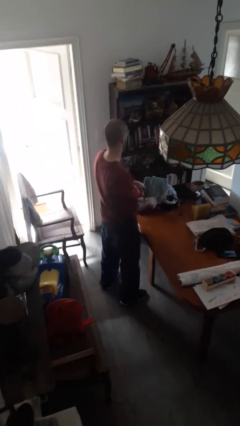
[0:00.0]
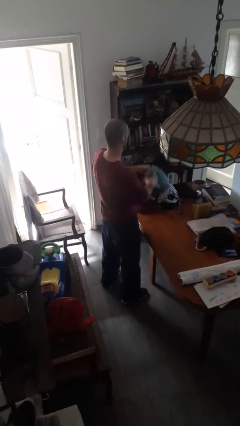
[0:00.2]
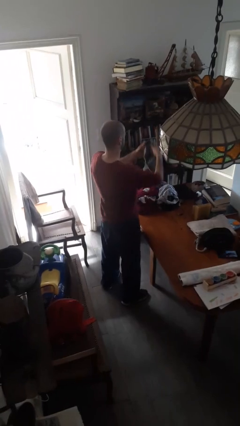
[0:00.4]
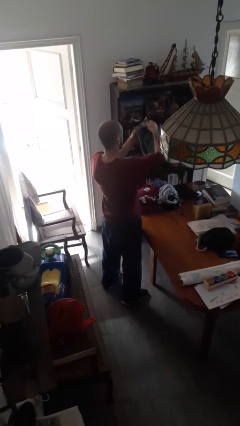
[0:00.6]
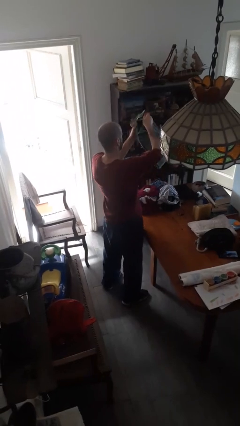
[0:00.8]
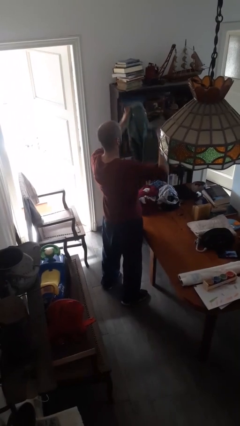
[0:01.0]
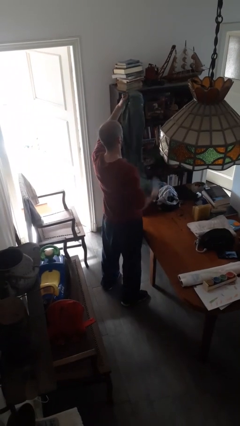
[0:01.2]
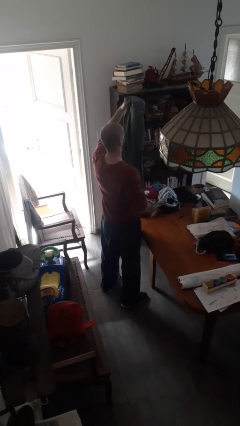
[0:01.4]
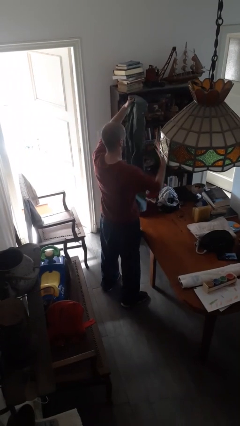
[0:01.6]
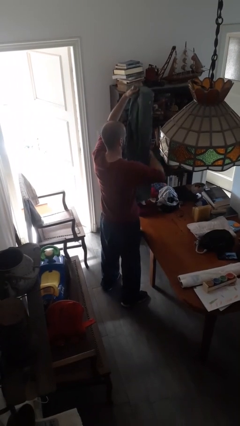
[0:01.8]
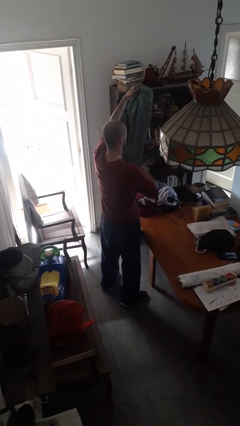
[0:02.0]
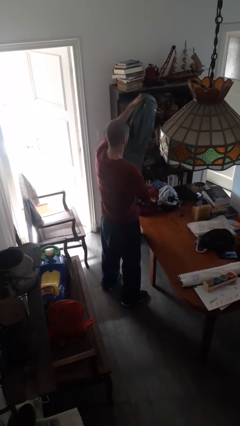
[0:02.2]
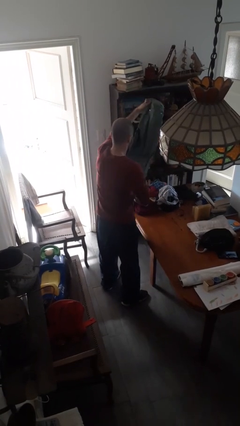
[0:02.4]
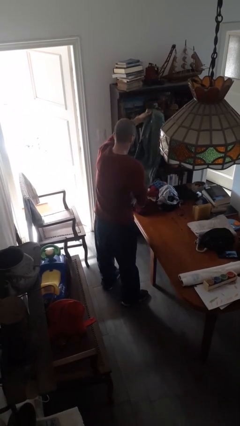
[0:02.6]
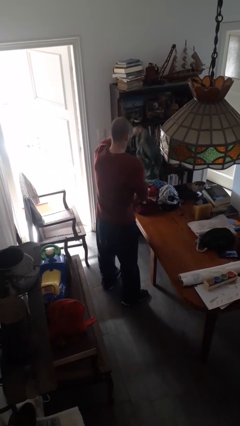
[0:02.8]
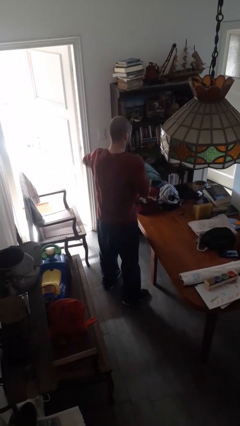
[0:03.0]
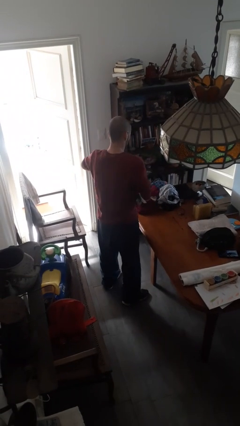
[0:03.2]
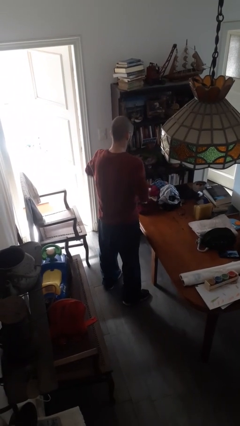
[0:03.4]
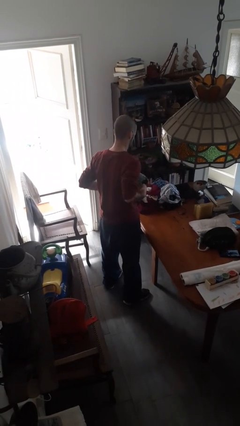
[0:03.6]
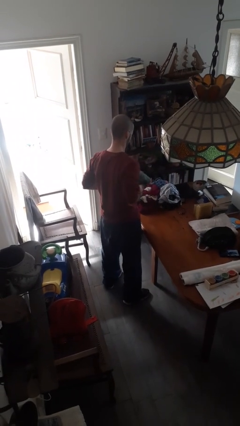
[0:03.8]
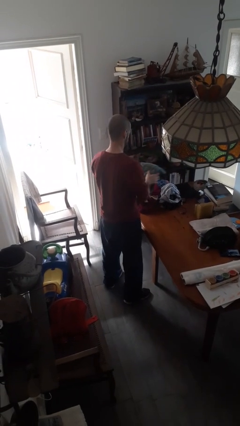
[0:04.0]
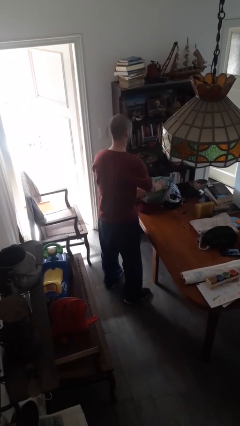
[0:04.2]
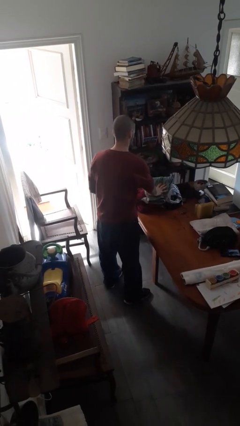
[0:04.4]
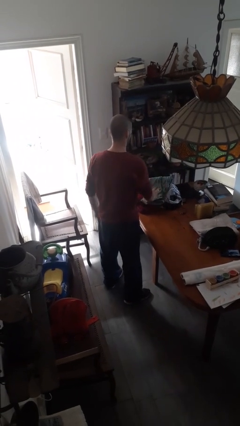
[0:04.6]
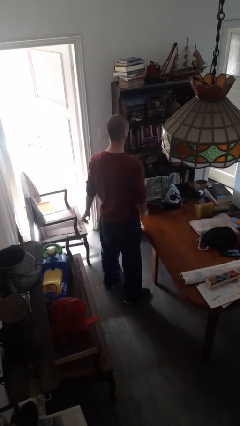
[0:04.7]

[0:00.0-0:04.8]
person folds pants

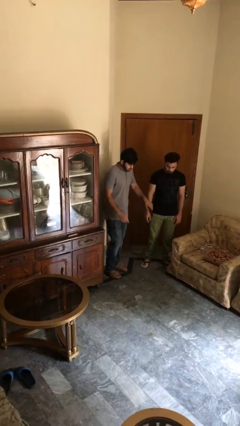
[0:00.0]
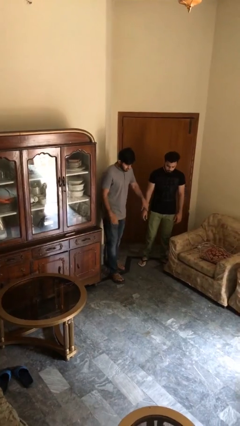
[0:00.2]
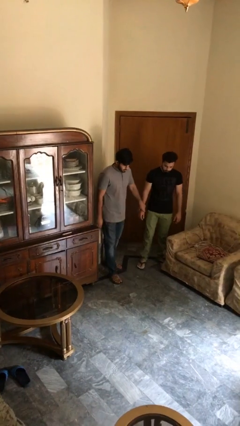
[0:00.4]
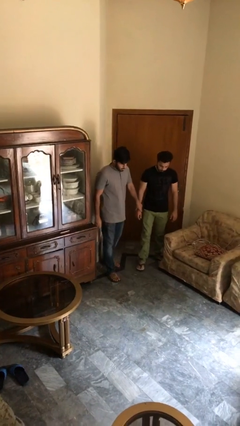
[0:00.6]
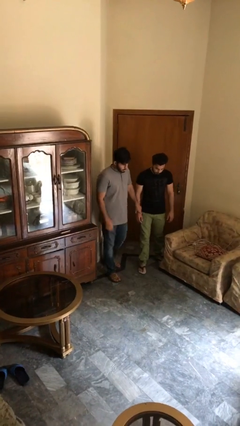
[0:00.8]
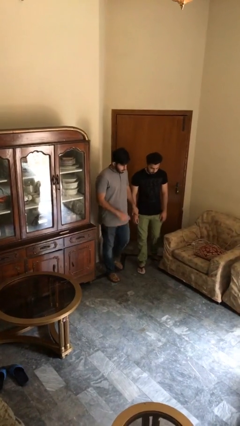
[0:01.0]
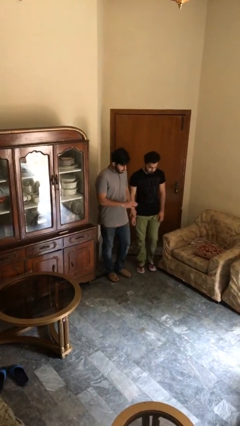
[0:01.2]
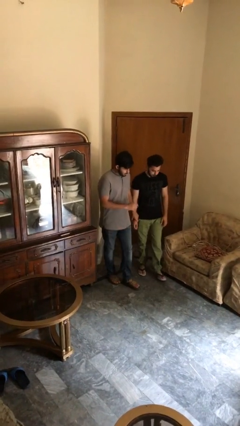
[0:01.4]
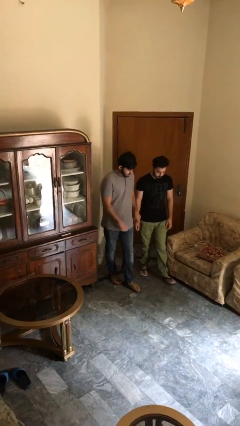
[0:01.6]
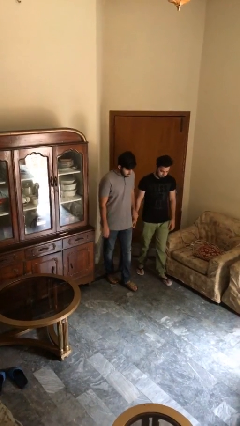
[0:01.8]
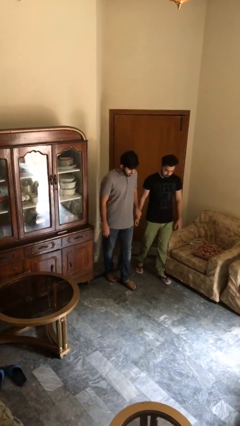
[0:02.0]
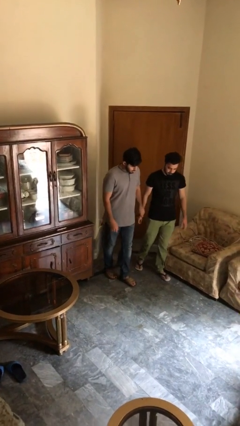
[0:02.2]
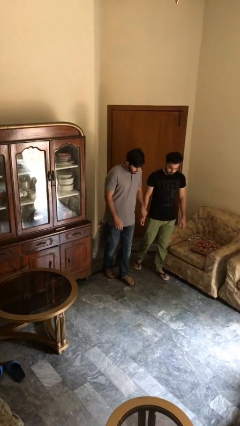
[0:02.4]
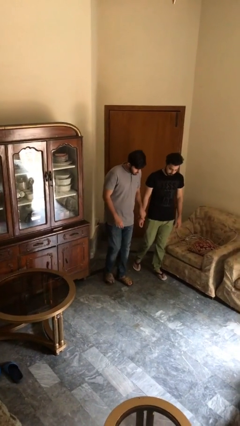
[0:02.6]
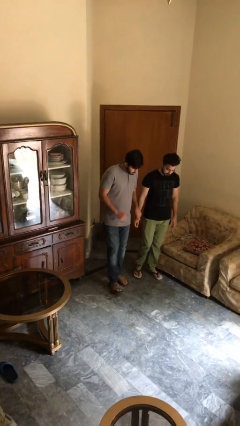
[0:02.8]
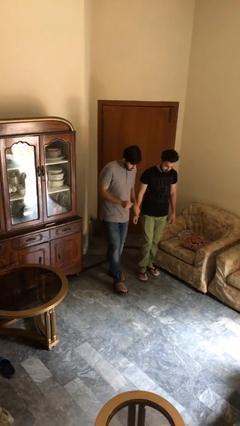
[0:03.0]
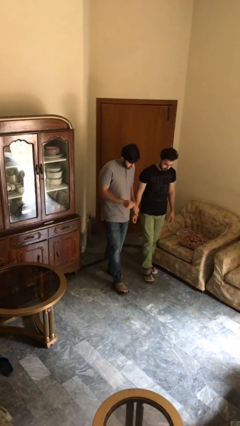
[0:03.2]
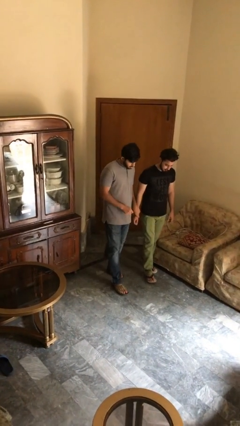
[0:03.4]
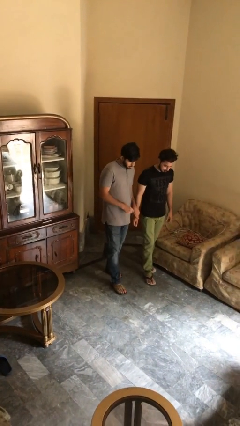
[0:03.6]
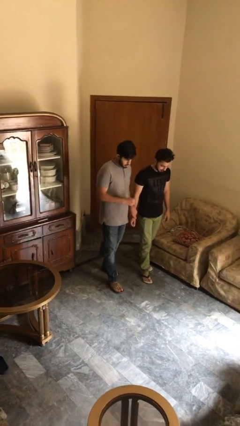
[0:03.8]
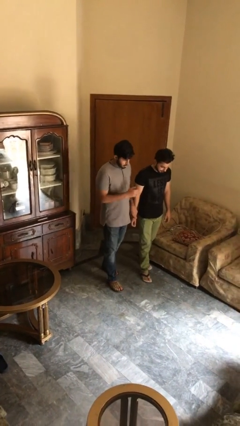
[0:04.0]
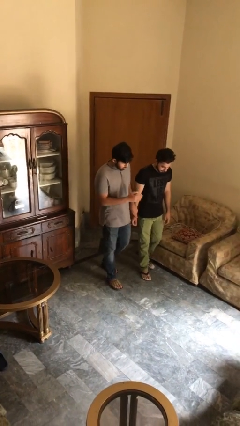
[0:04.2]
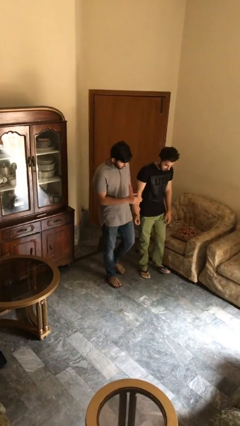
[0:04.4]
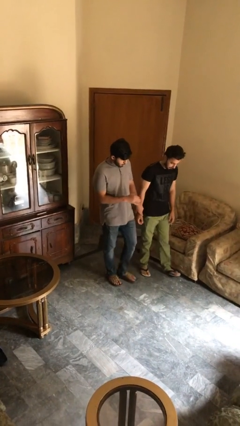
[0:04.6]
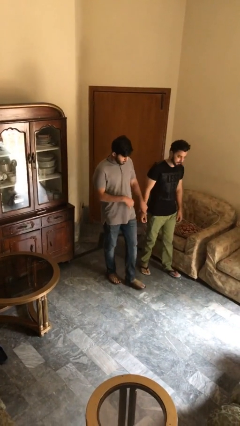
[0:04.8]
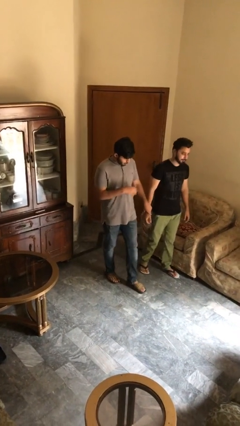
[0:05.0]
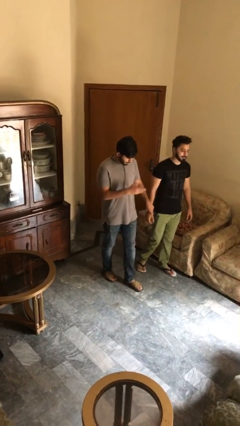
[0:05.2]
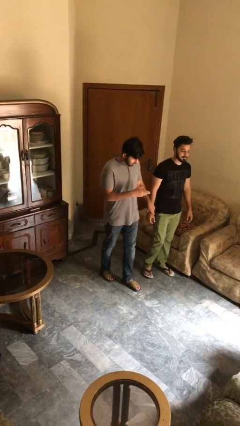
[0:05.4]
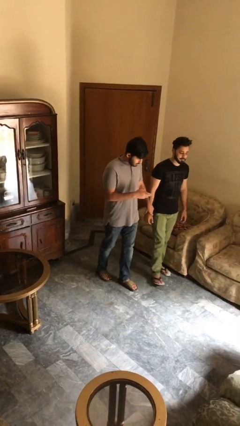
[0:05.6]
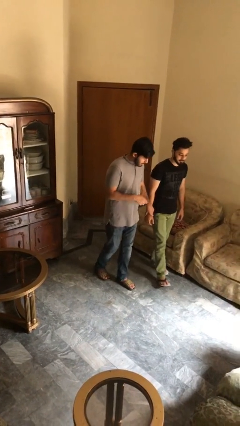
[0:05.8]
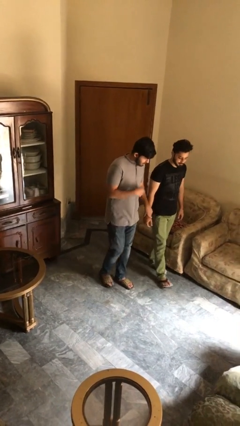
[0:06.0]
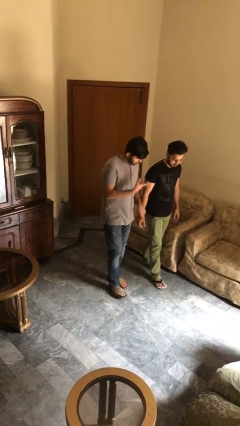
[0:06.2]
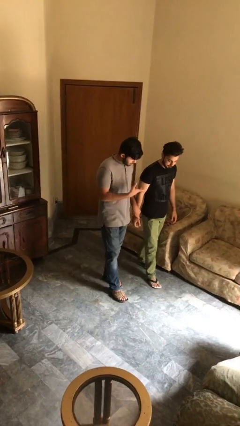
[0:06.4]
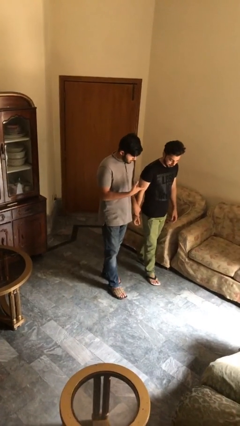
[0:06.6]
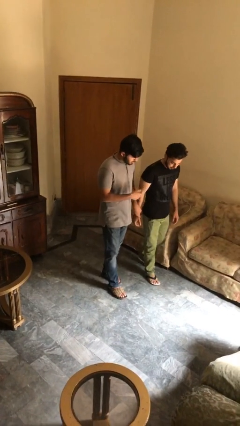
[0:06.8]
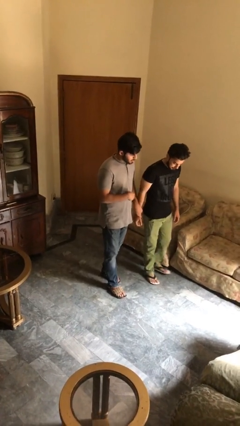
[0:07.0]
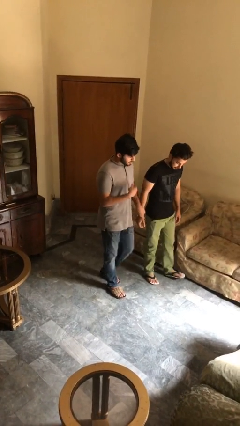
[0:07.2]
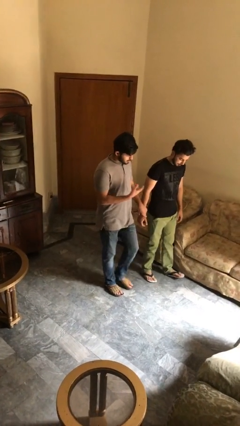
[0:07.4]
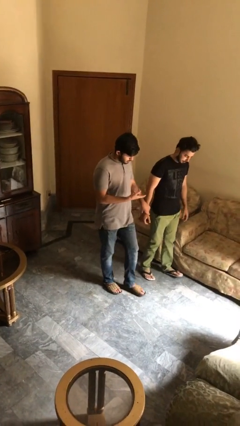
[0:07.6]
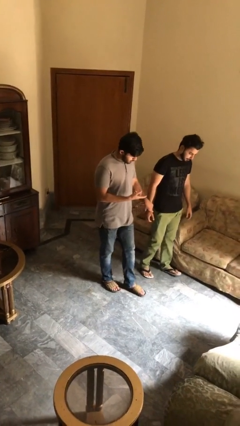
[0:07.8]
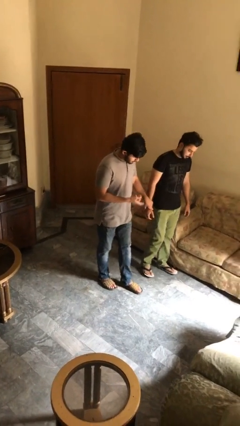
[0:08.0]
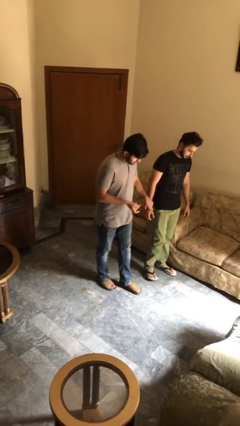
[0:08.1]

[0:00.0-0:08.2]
person holds hand

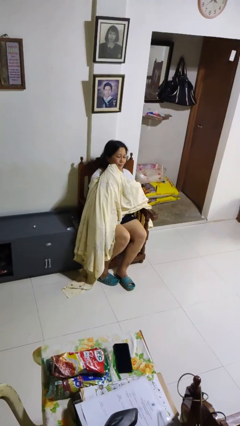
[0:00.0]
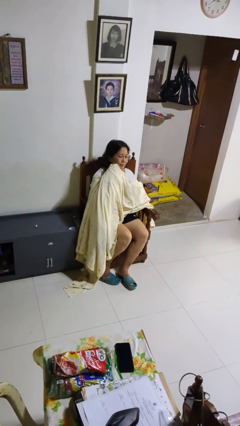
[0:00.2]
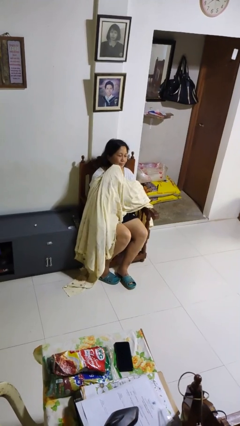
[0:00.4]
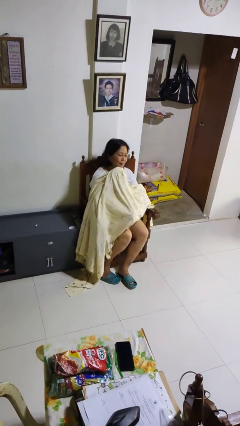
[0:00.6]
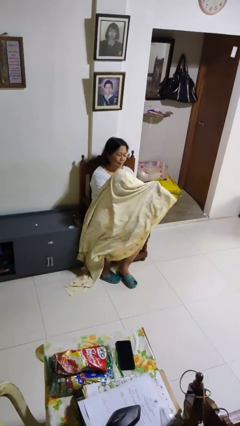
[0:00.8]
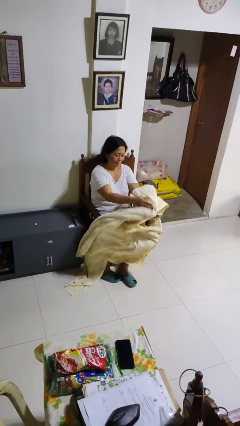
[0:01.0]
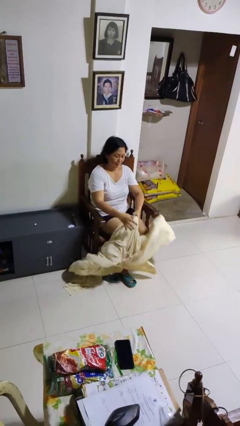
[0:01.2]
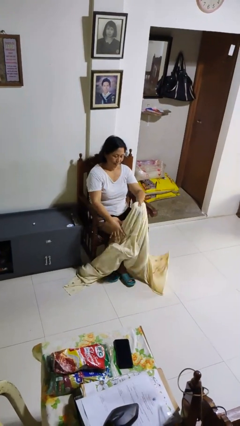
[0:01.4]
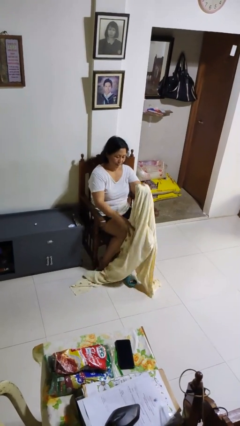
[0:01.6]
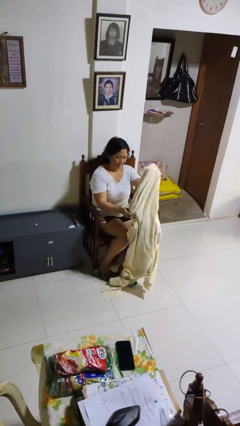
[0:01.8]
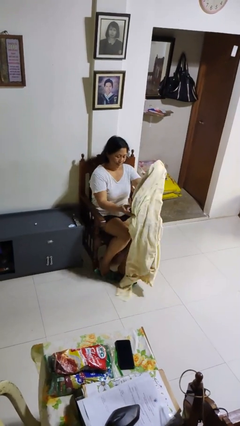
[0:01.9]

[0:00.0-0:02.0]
person uncovers with blanket

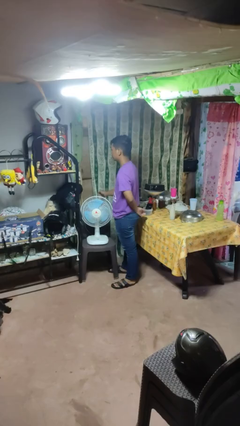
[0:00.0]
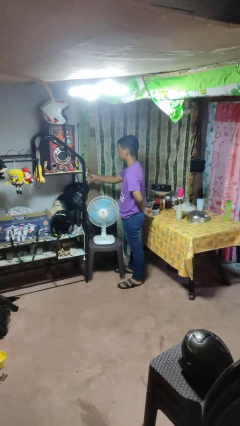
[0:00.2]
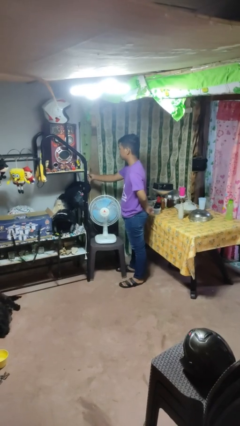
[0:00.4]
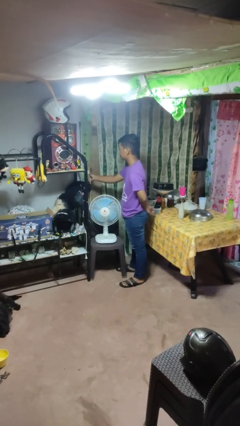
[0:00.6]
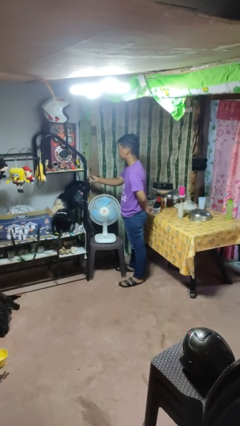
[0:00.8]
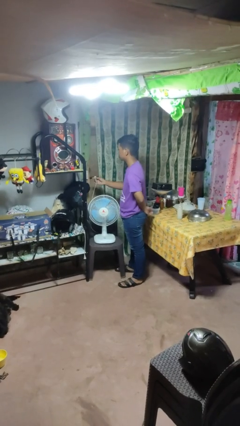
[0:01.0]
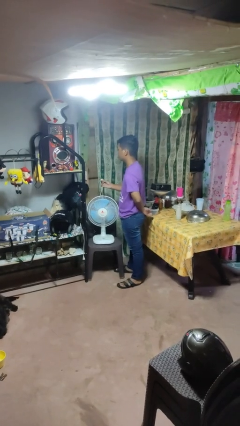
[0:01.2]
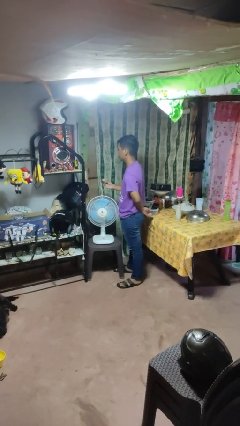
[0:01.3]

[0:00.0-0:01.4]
person unplugs from electrical socket

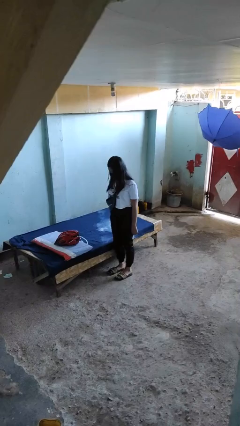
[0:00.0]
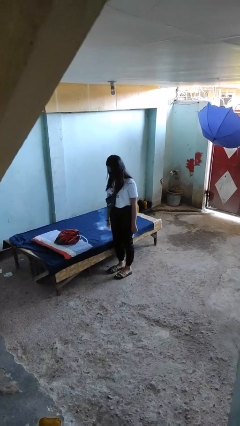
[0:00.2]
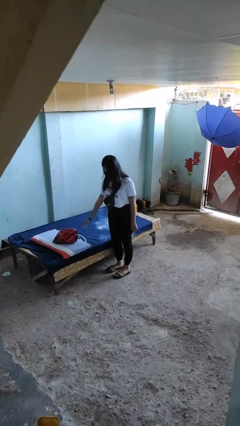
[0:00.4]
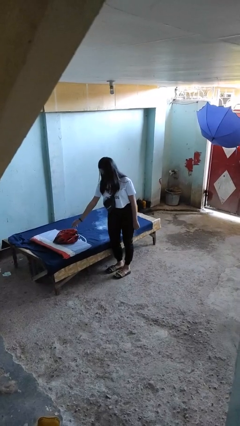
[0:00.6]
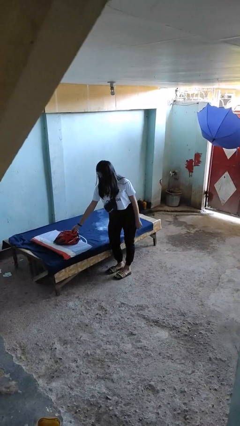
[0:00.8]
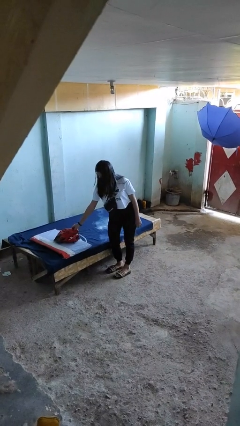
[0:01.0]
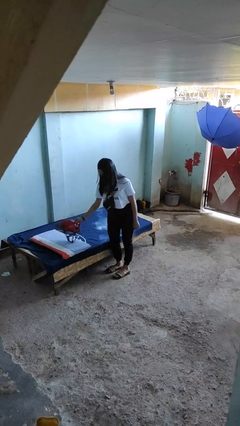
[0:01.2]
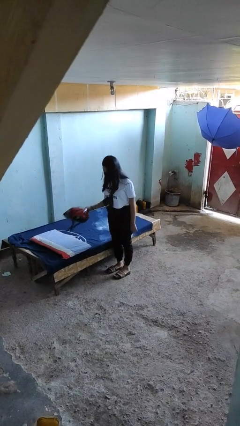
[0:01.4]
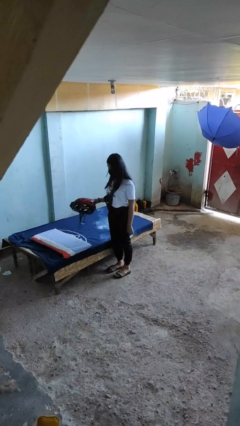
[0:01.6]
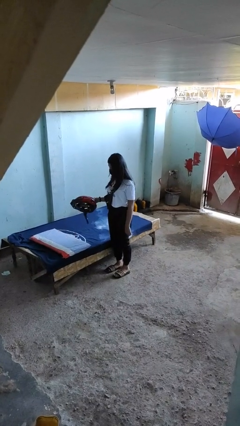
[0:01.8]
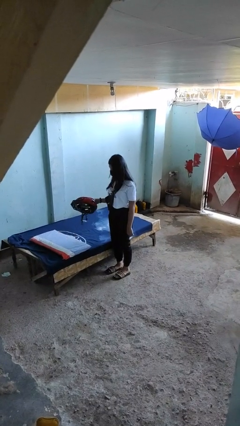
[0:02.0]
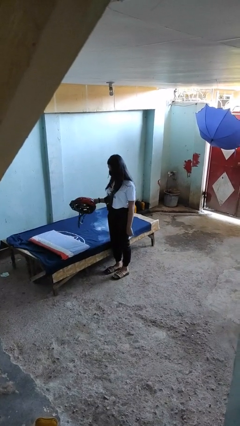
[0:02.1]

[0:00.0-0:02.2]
person picks up object from bed
